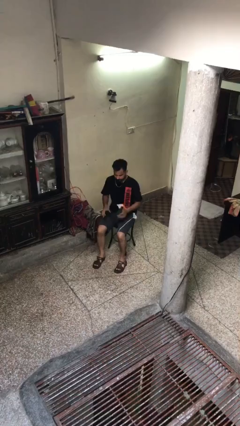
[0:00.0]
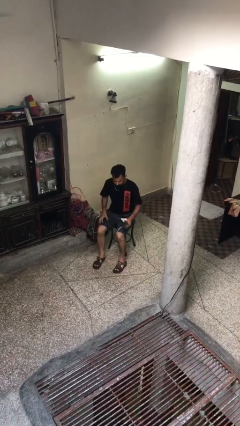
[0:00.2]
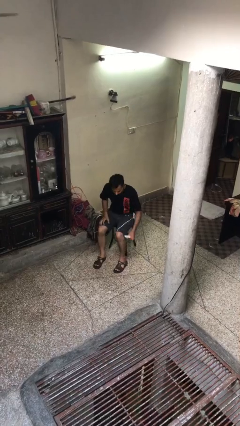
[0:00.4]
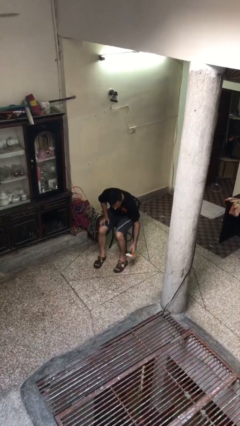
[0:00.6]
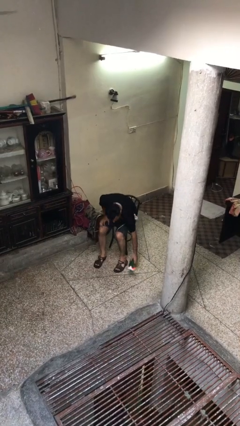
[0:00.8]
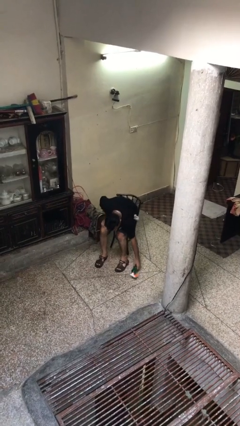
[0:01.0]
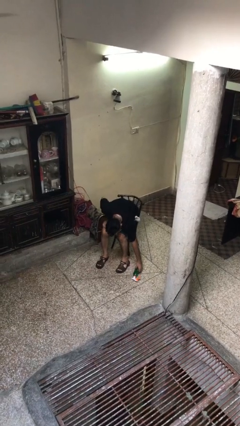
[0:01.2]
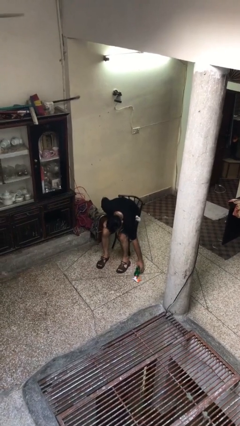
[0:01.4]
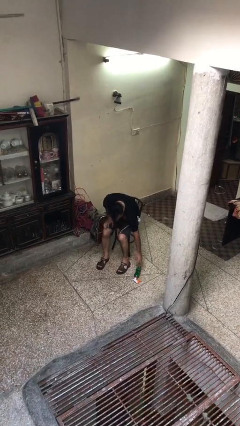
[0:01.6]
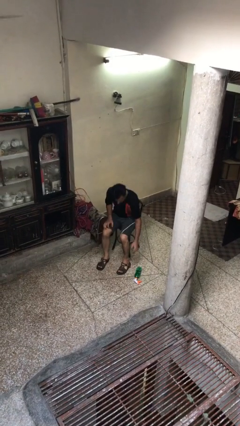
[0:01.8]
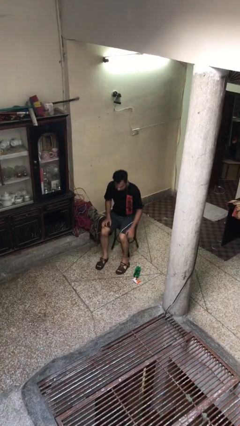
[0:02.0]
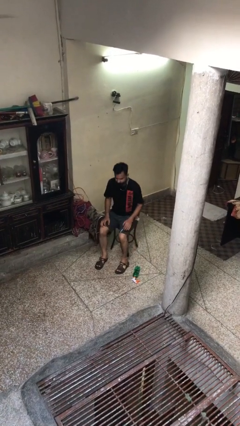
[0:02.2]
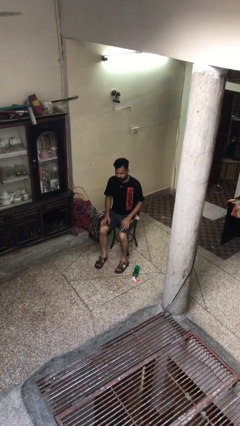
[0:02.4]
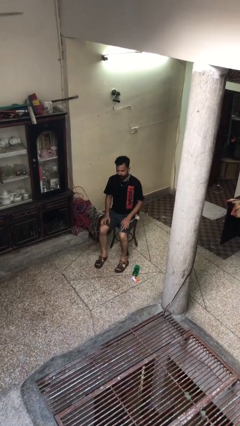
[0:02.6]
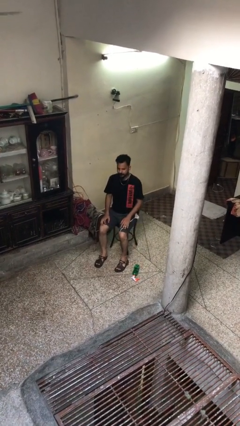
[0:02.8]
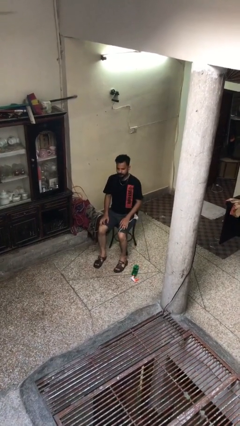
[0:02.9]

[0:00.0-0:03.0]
person puts down object on floor

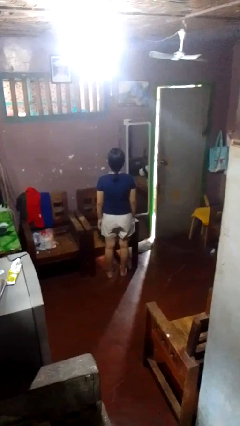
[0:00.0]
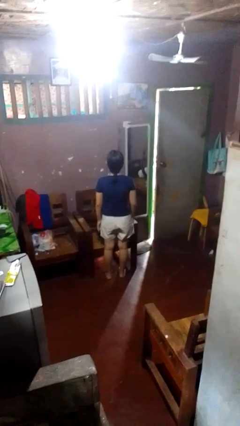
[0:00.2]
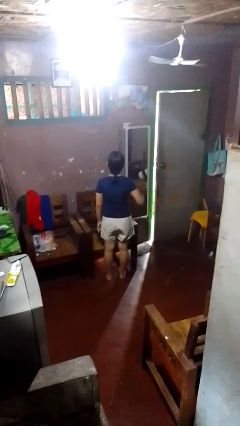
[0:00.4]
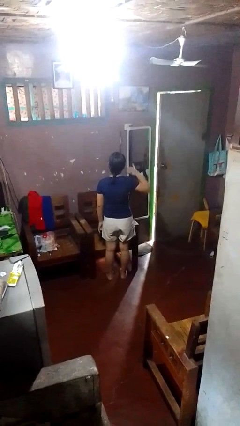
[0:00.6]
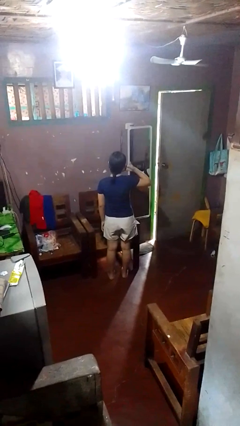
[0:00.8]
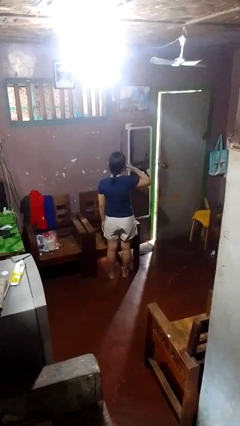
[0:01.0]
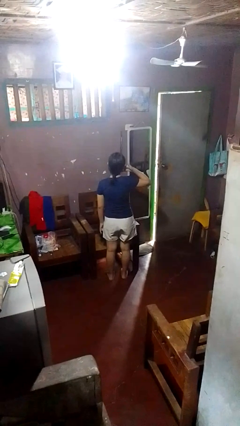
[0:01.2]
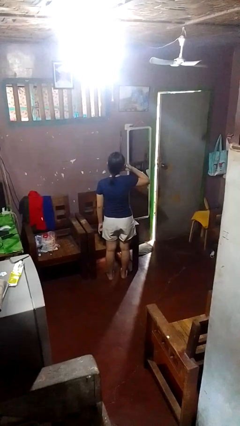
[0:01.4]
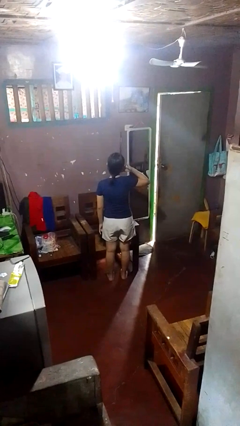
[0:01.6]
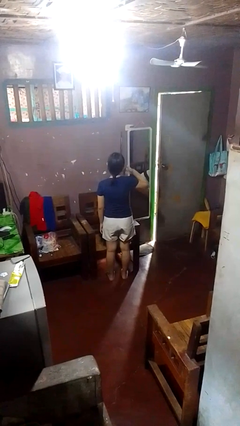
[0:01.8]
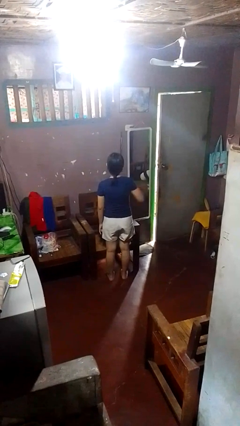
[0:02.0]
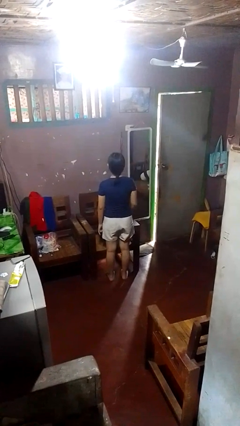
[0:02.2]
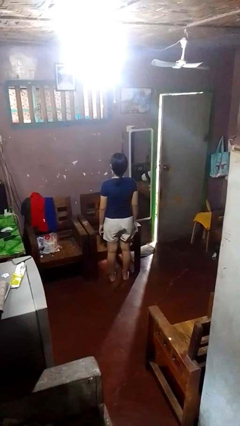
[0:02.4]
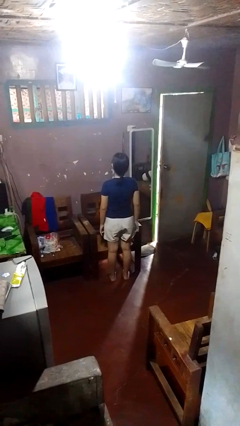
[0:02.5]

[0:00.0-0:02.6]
person gestures call me

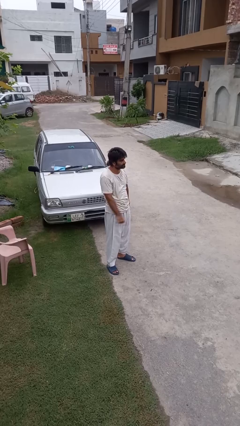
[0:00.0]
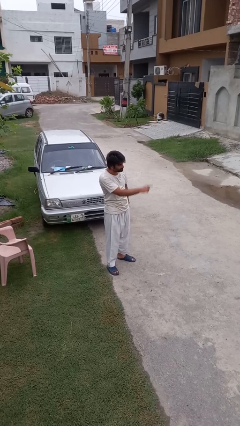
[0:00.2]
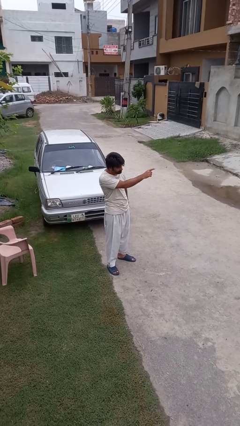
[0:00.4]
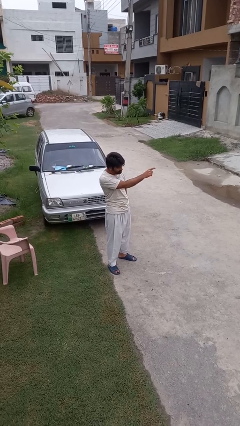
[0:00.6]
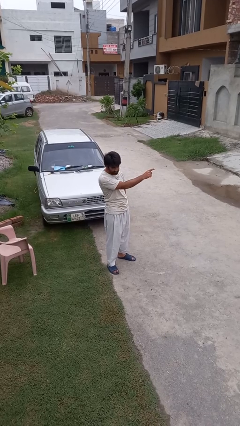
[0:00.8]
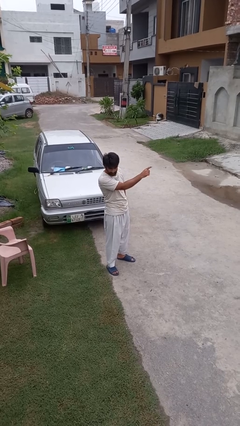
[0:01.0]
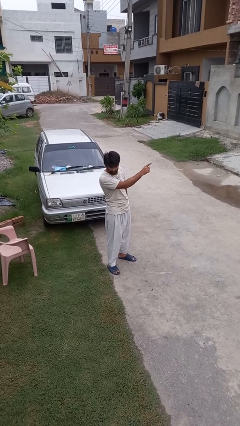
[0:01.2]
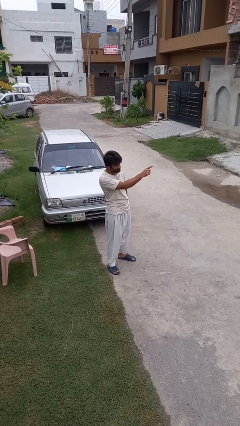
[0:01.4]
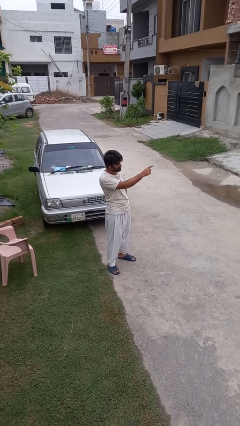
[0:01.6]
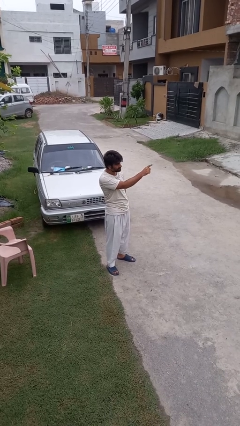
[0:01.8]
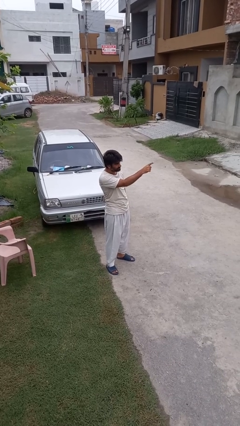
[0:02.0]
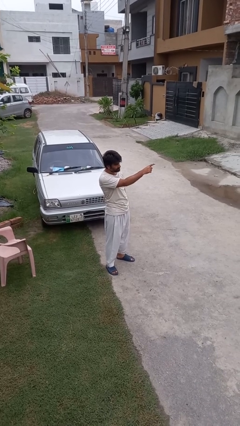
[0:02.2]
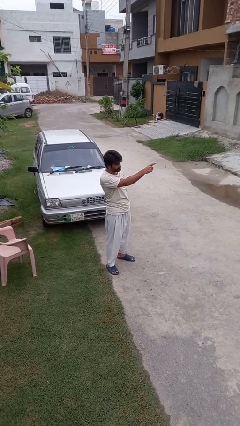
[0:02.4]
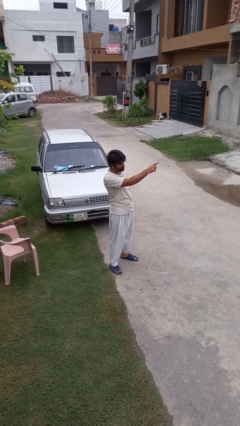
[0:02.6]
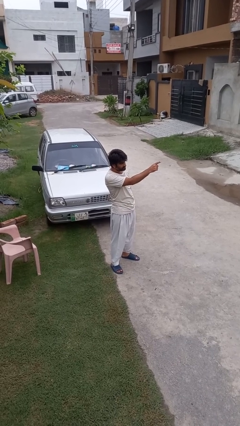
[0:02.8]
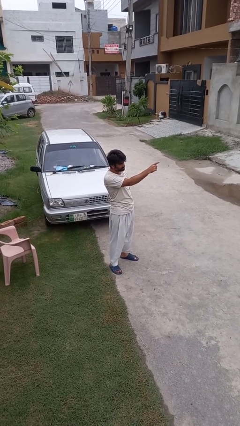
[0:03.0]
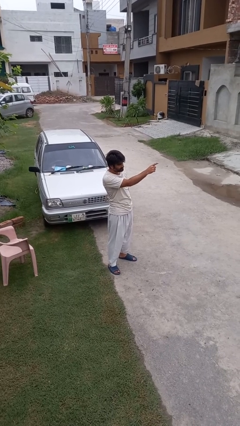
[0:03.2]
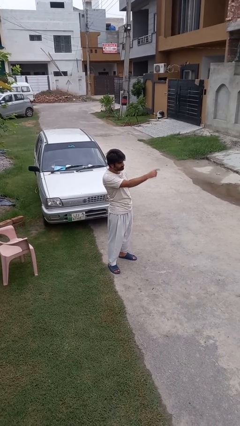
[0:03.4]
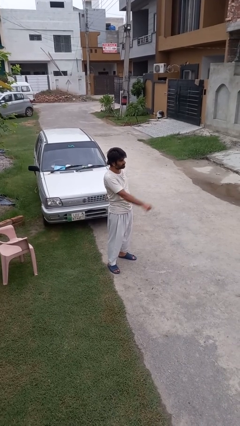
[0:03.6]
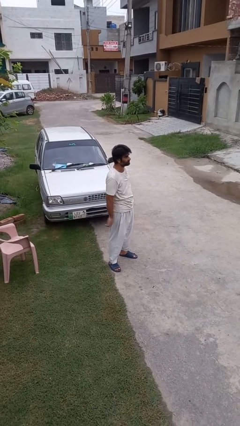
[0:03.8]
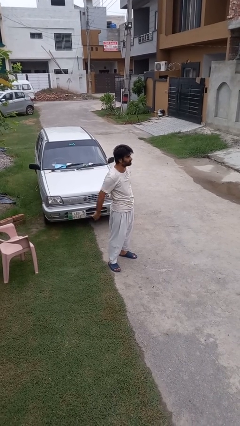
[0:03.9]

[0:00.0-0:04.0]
person points at person

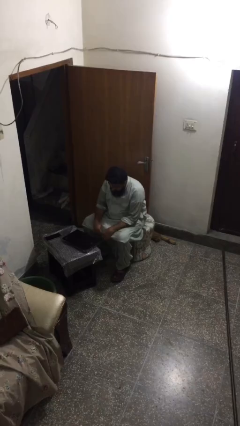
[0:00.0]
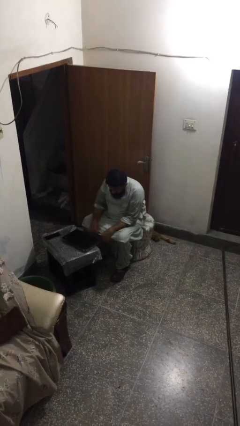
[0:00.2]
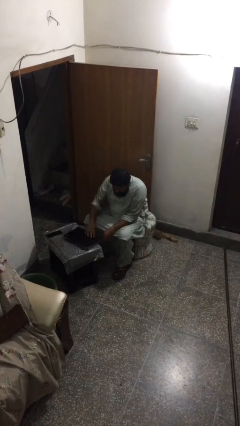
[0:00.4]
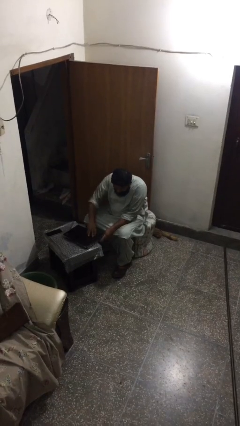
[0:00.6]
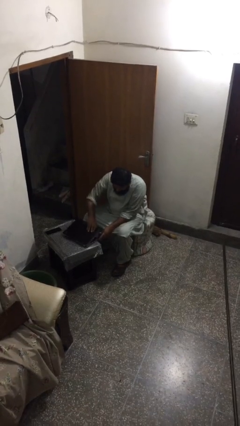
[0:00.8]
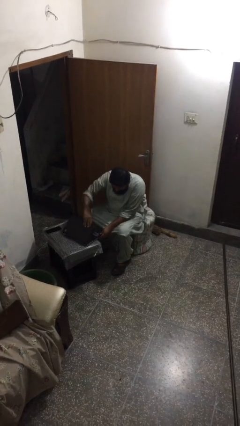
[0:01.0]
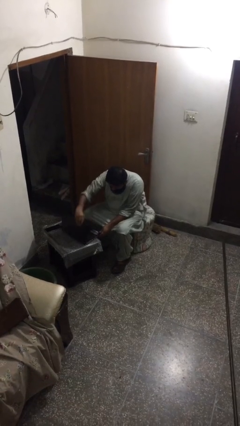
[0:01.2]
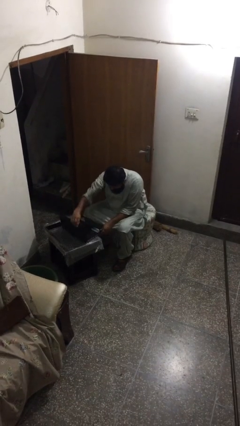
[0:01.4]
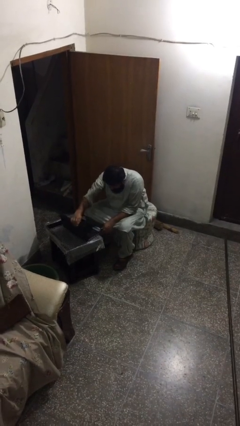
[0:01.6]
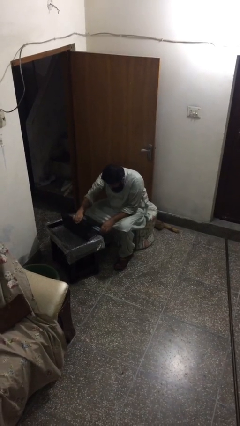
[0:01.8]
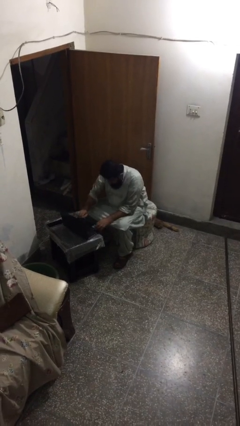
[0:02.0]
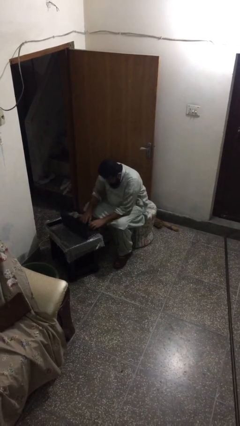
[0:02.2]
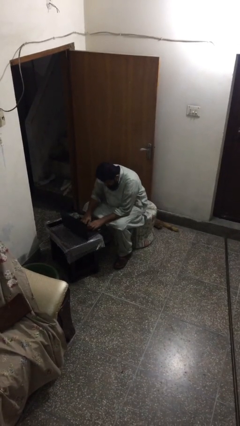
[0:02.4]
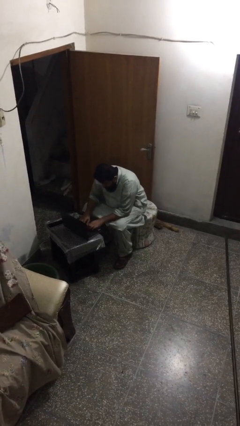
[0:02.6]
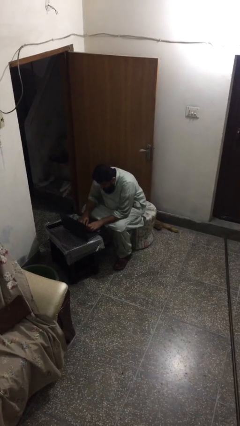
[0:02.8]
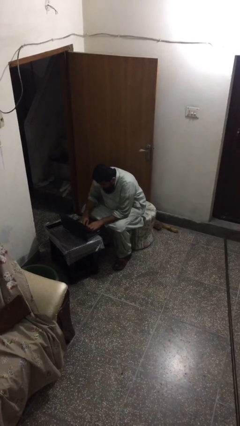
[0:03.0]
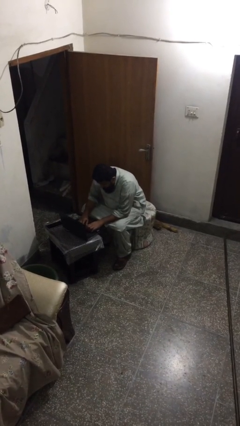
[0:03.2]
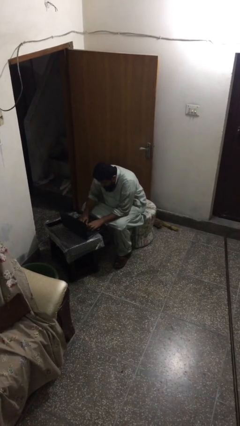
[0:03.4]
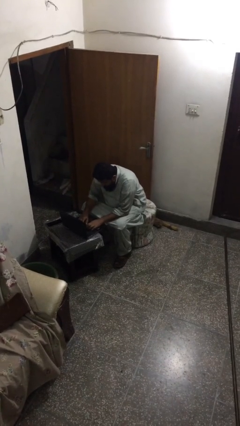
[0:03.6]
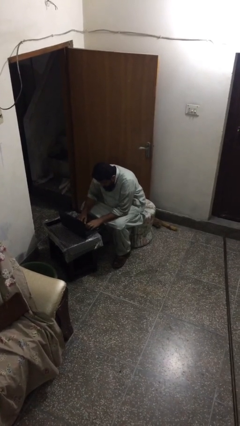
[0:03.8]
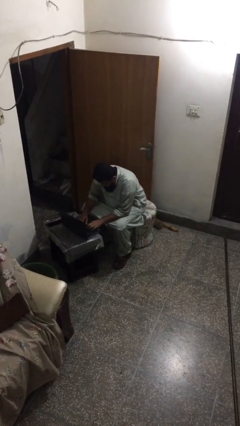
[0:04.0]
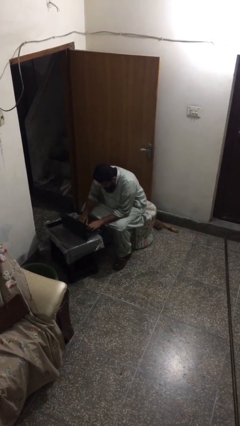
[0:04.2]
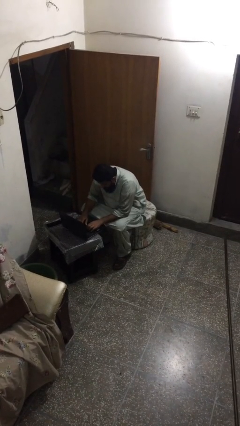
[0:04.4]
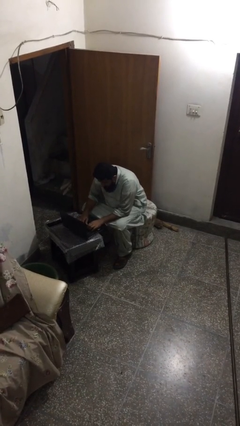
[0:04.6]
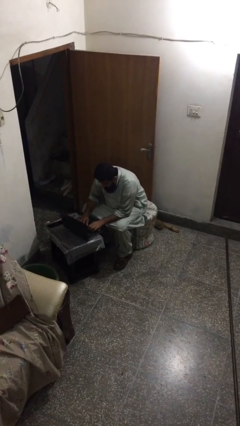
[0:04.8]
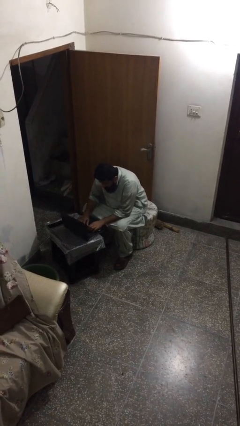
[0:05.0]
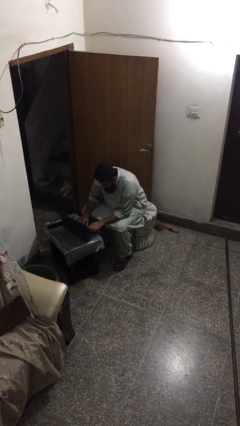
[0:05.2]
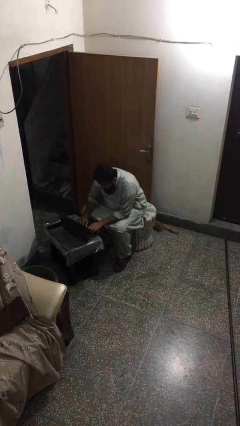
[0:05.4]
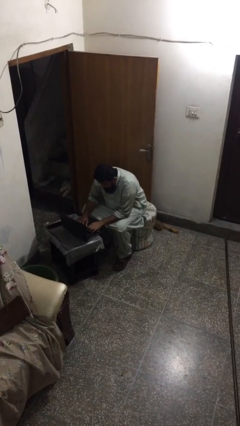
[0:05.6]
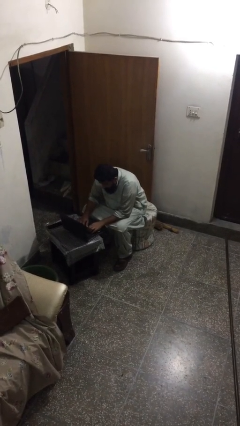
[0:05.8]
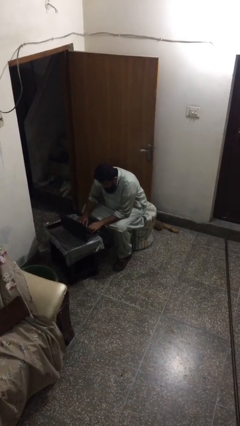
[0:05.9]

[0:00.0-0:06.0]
person interacts with laptop

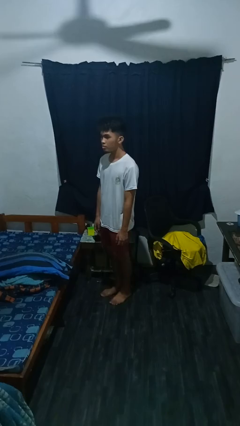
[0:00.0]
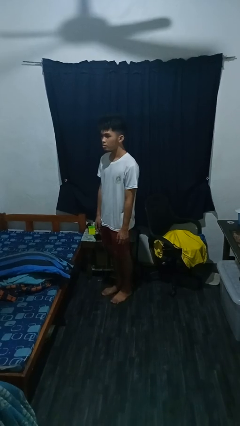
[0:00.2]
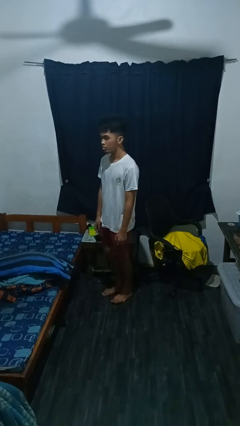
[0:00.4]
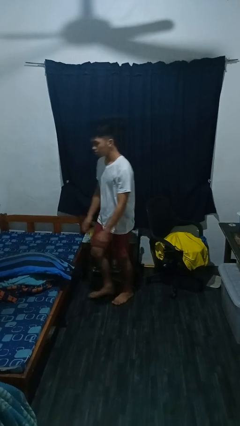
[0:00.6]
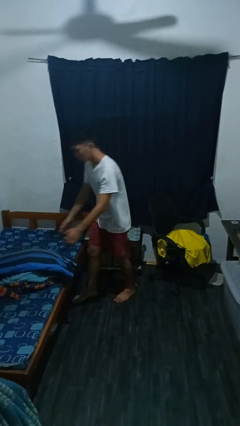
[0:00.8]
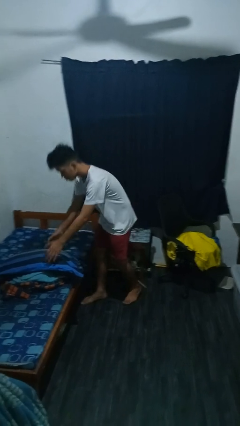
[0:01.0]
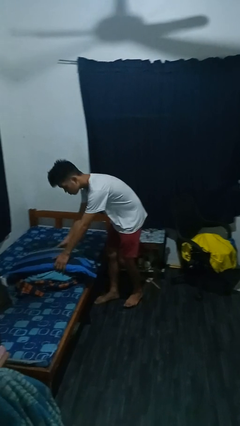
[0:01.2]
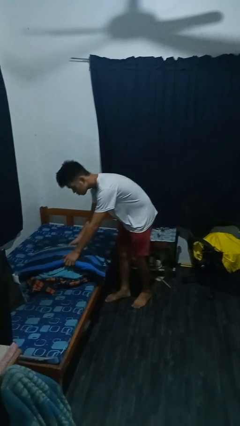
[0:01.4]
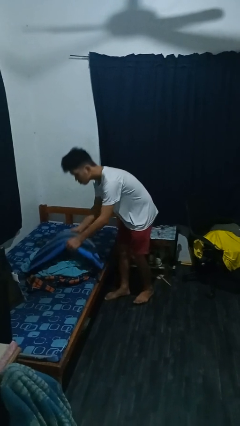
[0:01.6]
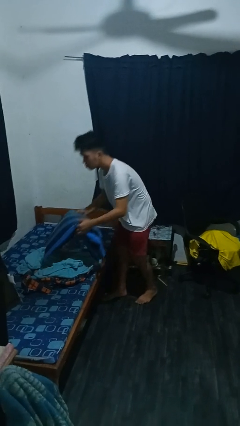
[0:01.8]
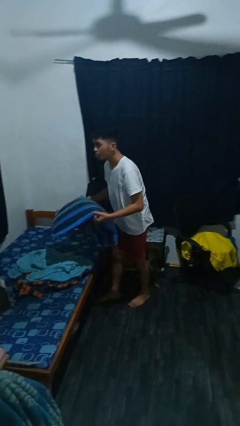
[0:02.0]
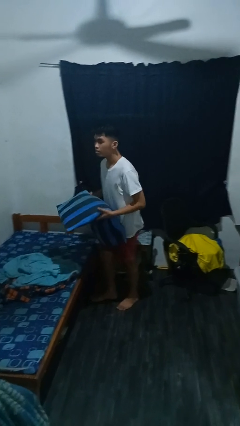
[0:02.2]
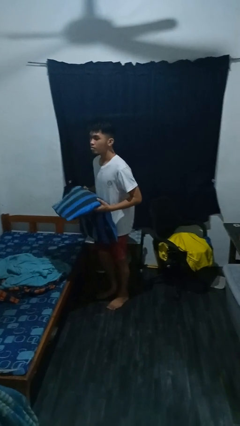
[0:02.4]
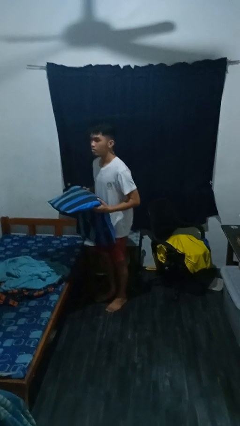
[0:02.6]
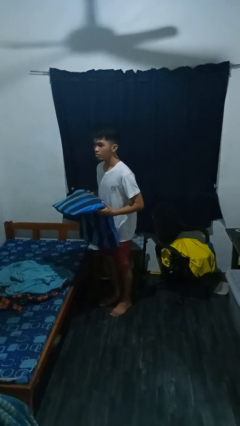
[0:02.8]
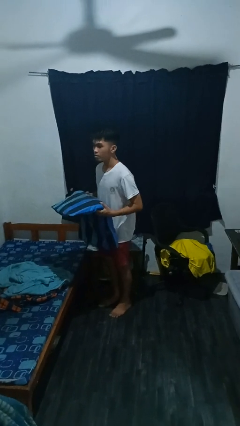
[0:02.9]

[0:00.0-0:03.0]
person picks up object from bed
